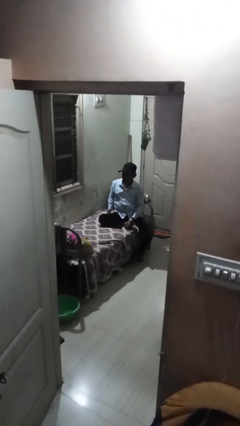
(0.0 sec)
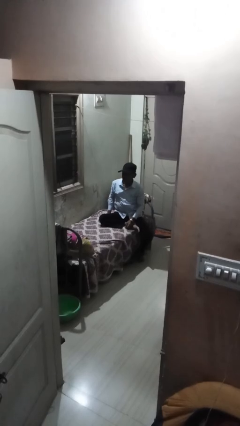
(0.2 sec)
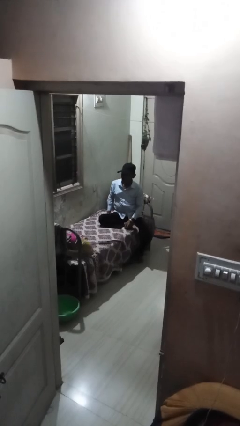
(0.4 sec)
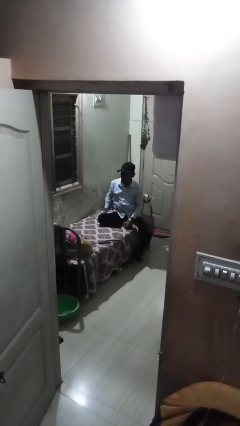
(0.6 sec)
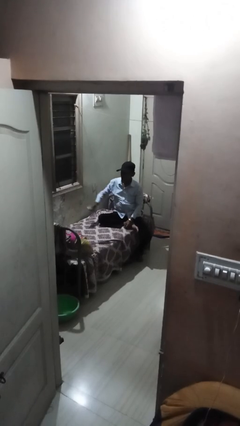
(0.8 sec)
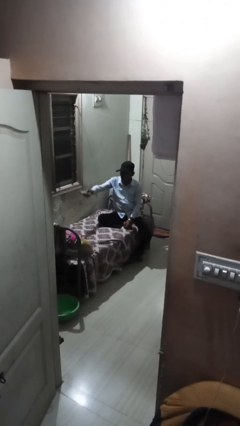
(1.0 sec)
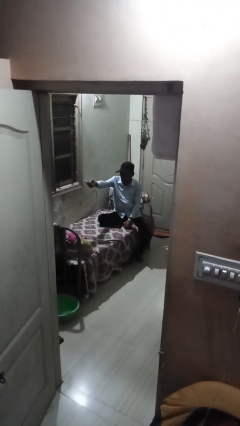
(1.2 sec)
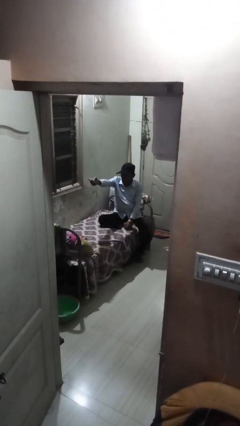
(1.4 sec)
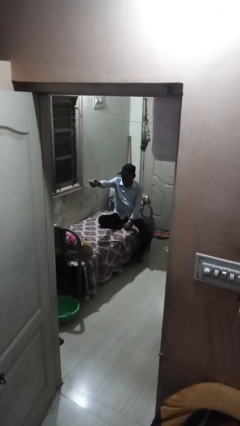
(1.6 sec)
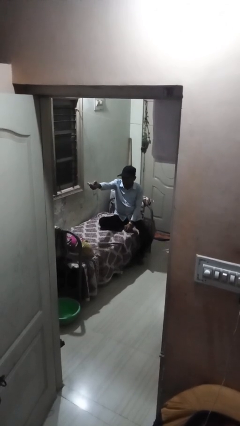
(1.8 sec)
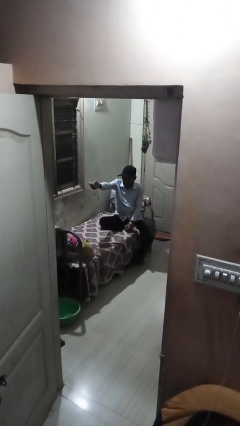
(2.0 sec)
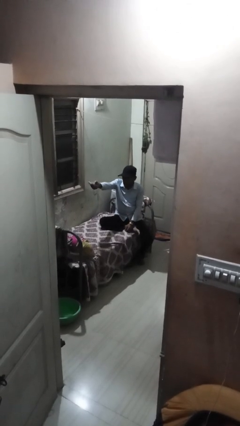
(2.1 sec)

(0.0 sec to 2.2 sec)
person uses television remote

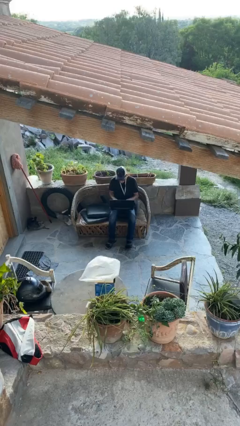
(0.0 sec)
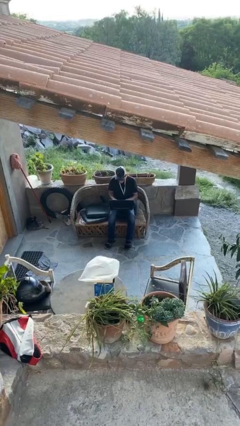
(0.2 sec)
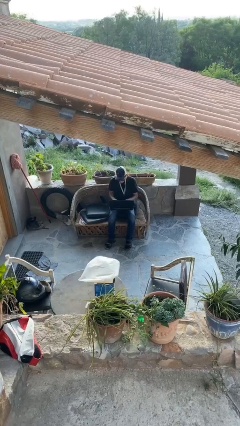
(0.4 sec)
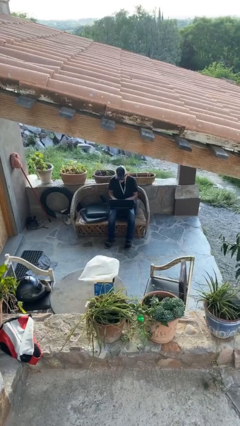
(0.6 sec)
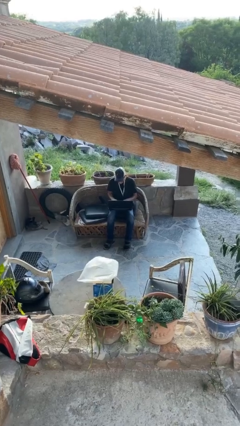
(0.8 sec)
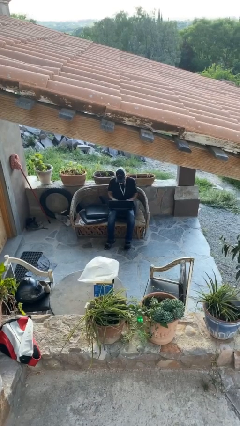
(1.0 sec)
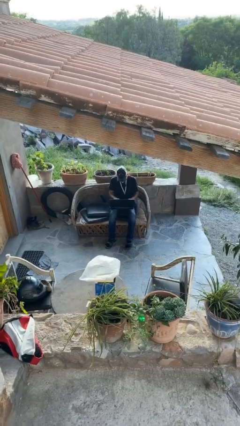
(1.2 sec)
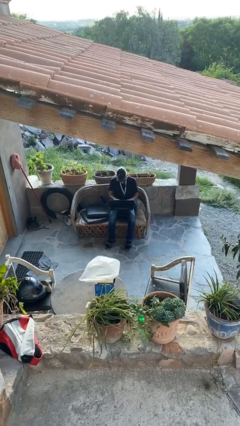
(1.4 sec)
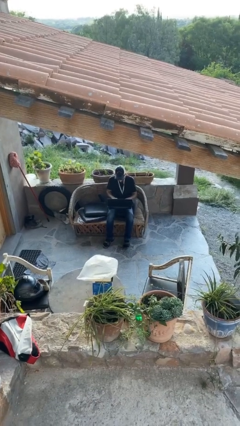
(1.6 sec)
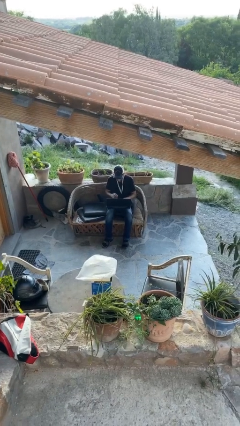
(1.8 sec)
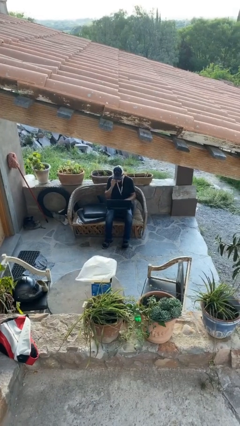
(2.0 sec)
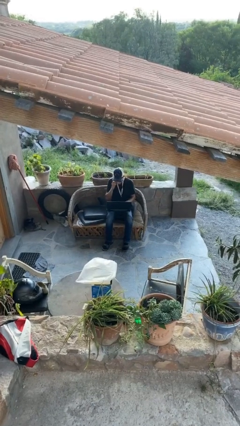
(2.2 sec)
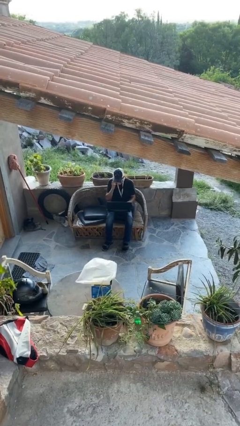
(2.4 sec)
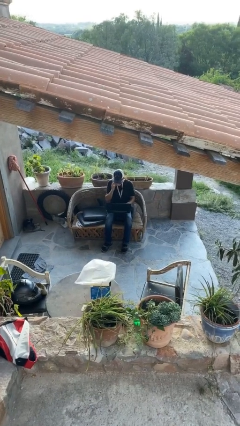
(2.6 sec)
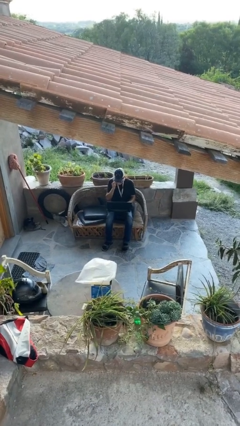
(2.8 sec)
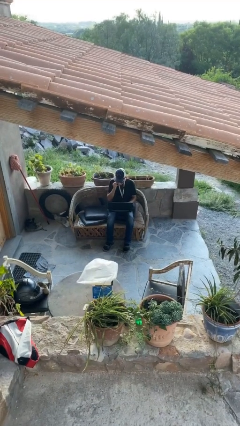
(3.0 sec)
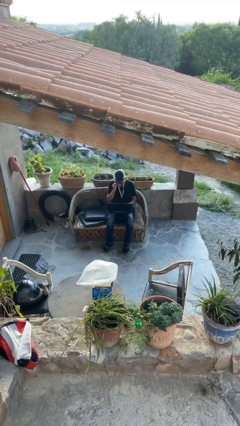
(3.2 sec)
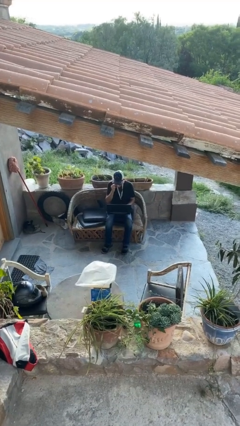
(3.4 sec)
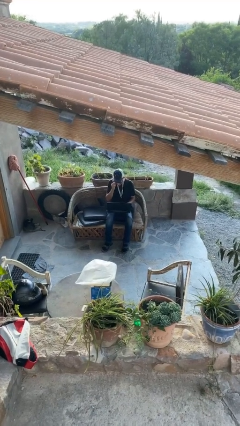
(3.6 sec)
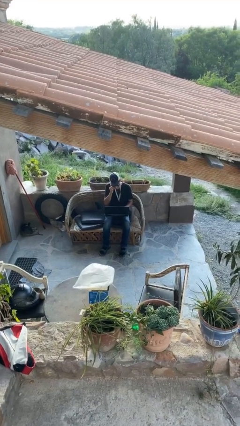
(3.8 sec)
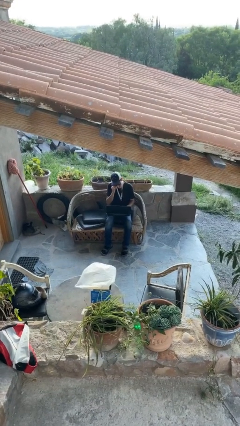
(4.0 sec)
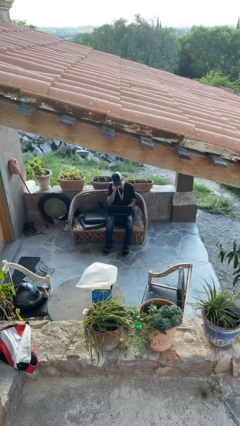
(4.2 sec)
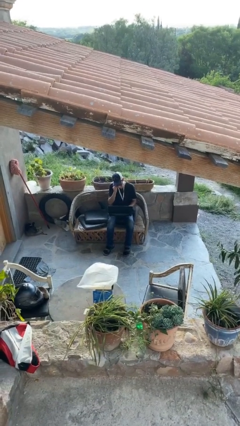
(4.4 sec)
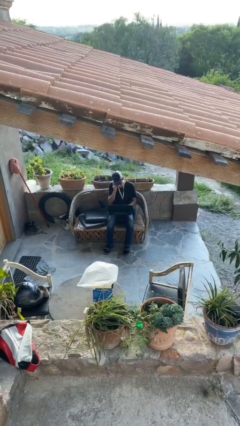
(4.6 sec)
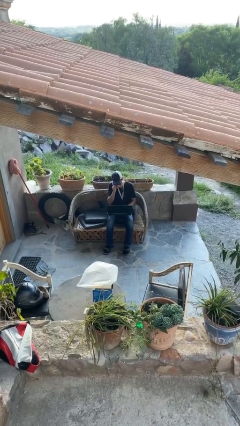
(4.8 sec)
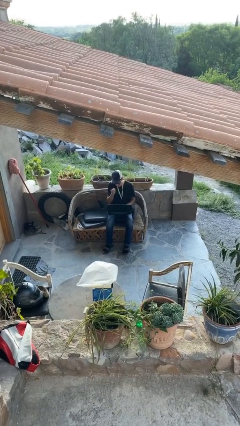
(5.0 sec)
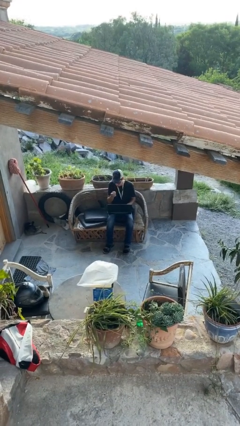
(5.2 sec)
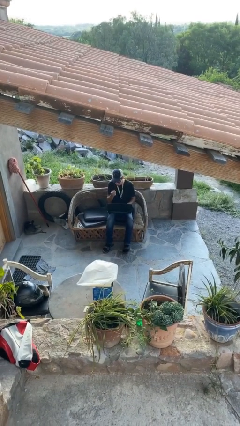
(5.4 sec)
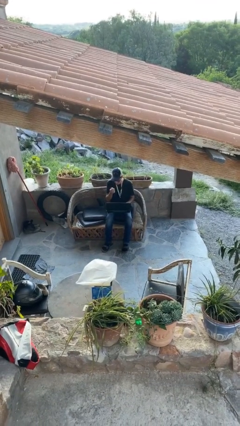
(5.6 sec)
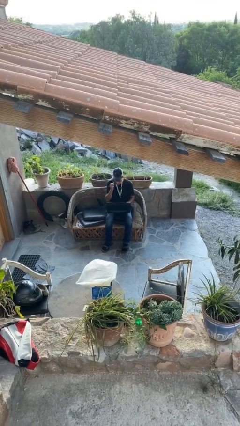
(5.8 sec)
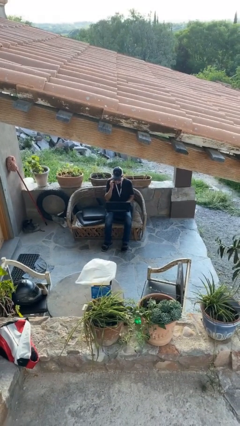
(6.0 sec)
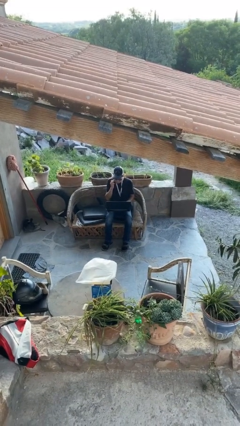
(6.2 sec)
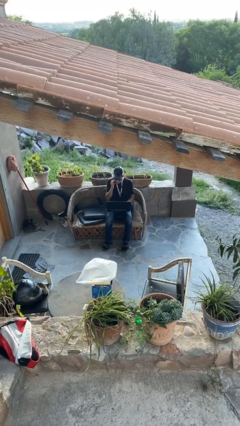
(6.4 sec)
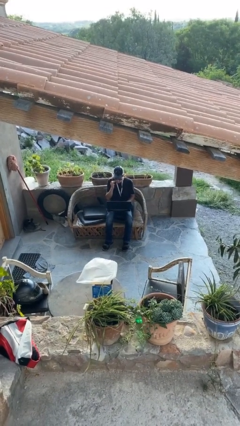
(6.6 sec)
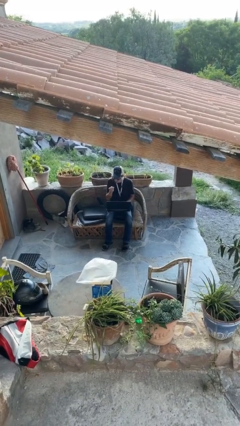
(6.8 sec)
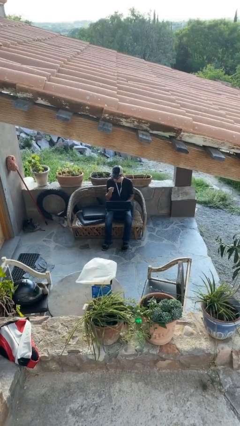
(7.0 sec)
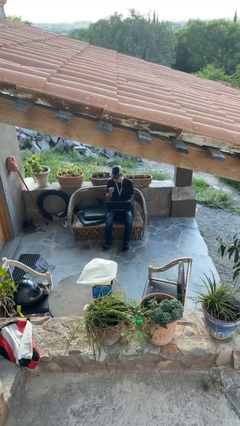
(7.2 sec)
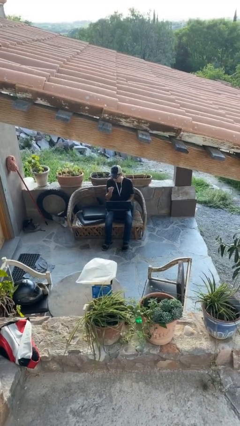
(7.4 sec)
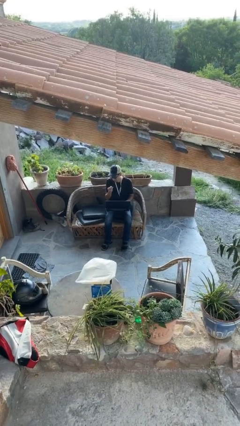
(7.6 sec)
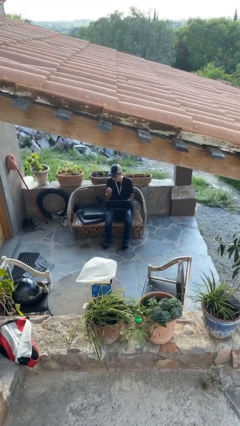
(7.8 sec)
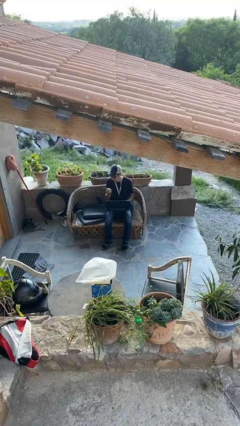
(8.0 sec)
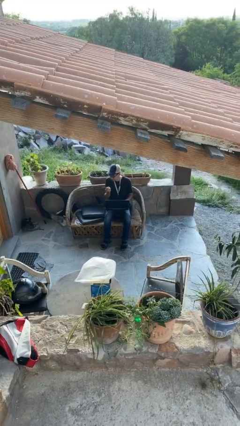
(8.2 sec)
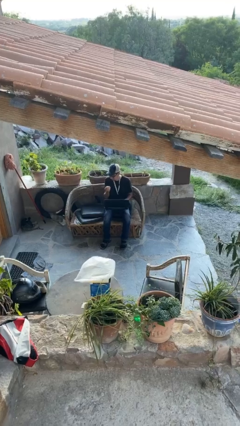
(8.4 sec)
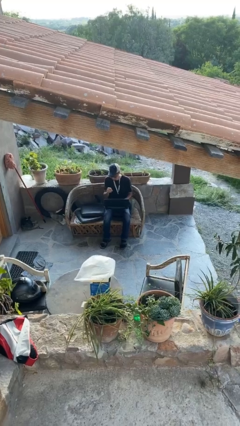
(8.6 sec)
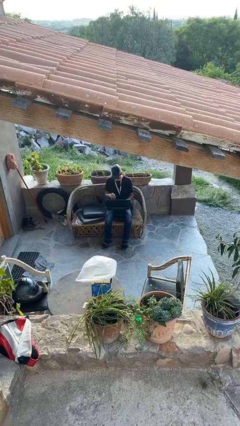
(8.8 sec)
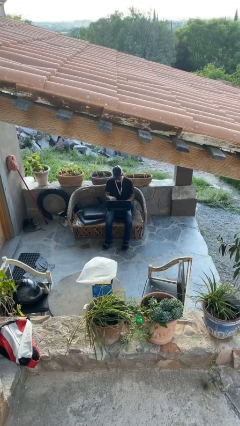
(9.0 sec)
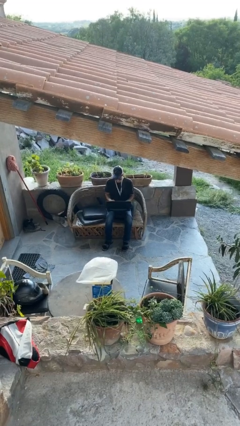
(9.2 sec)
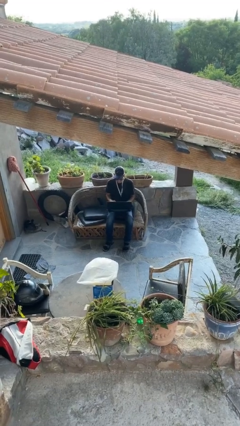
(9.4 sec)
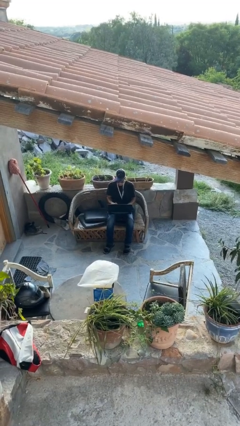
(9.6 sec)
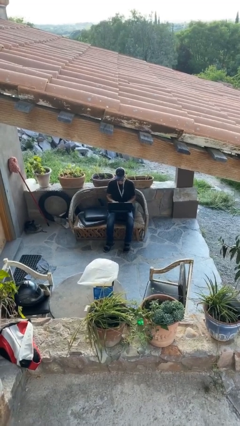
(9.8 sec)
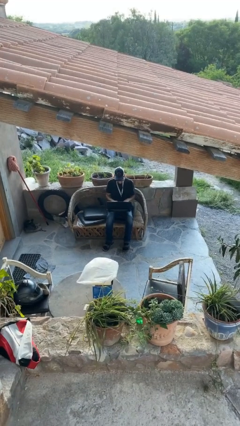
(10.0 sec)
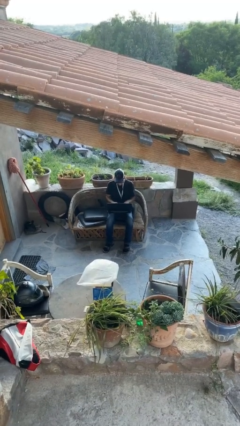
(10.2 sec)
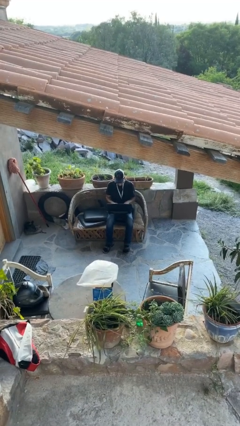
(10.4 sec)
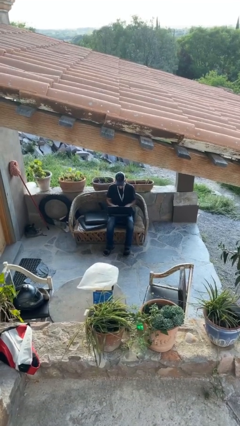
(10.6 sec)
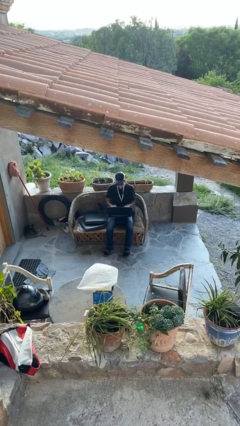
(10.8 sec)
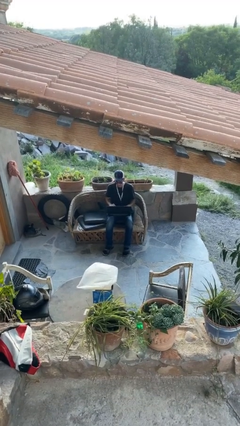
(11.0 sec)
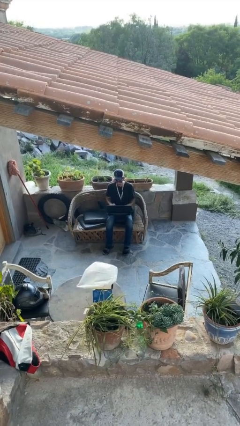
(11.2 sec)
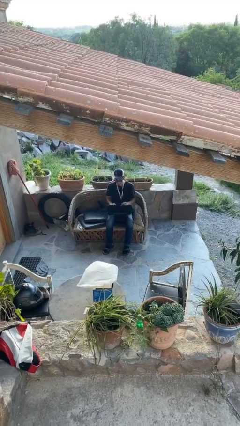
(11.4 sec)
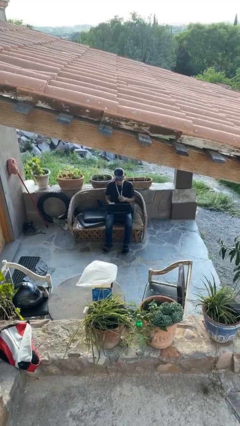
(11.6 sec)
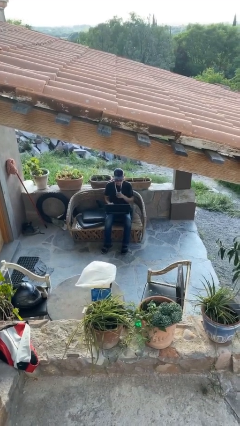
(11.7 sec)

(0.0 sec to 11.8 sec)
person interacts with laptop

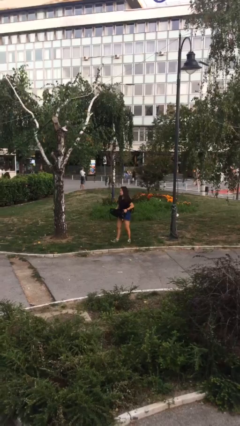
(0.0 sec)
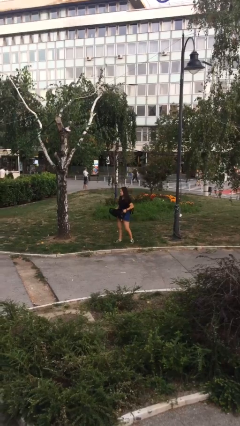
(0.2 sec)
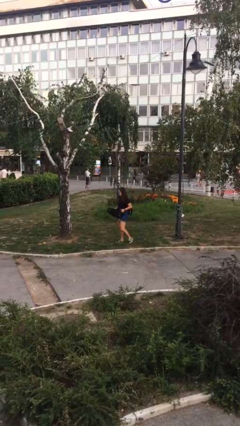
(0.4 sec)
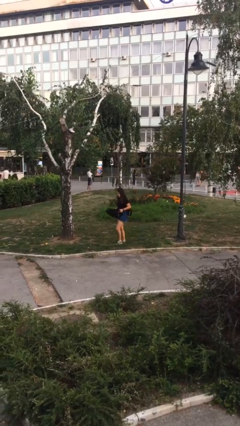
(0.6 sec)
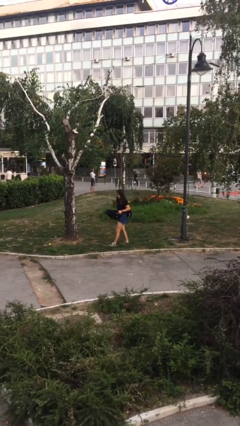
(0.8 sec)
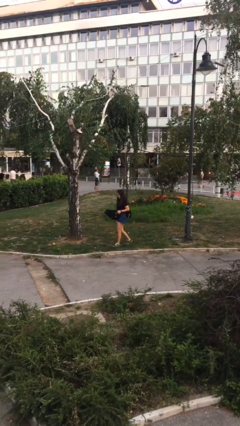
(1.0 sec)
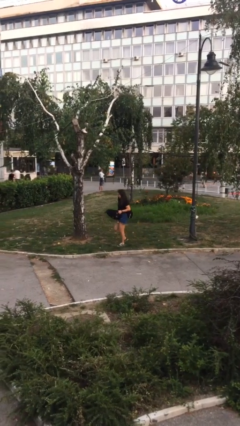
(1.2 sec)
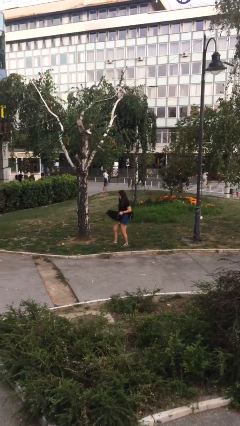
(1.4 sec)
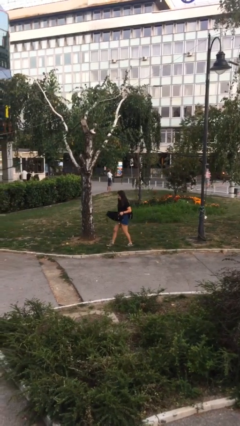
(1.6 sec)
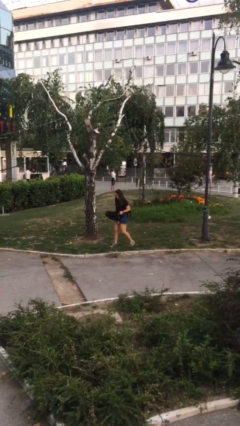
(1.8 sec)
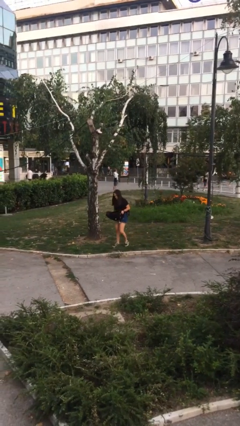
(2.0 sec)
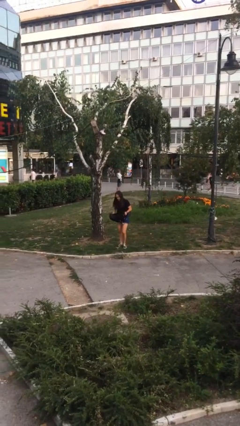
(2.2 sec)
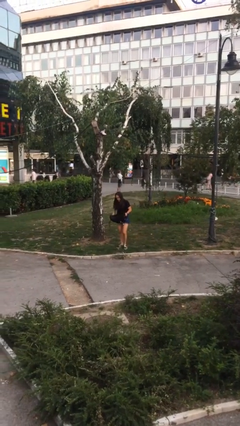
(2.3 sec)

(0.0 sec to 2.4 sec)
person carries heavy object

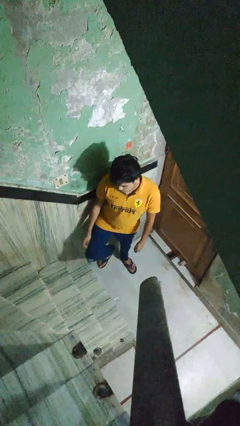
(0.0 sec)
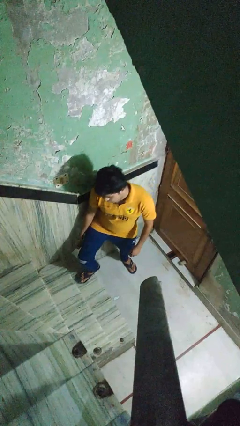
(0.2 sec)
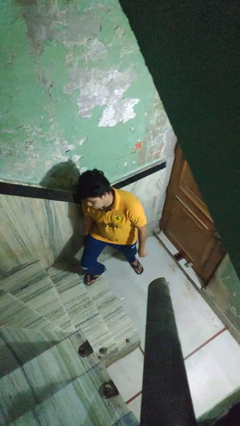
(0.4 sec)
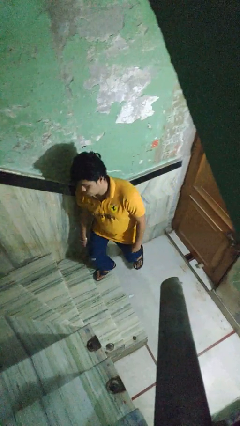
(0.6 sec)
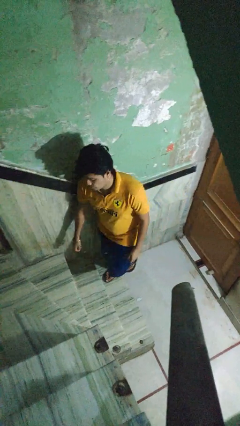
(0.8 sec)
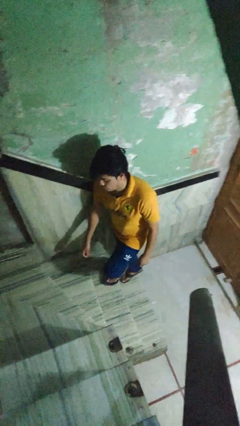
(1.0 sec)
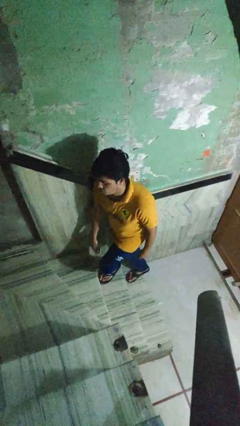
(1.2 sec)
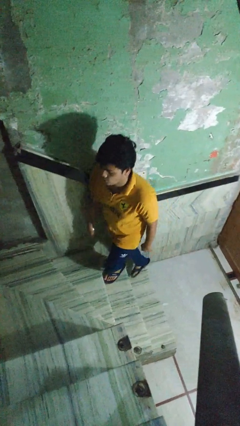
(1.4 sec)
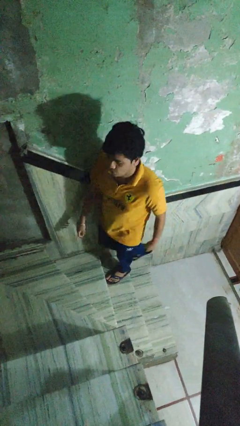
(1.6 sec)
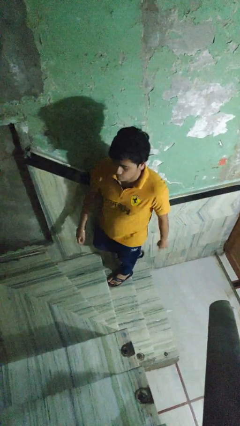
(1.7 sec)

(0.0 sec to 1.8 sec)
person climbs up stairs
